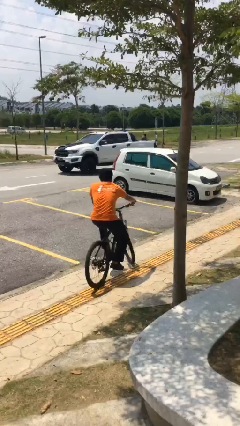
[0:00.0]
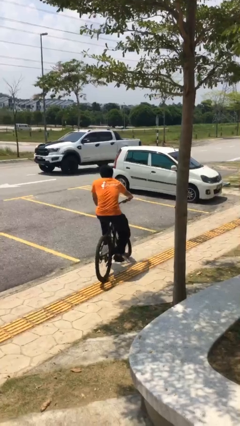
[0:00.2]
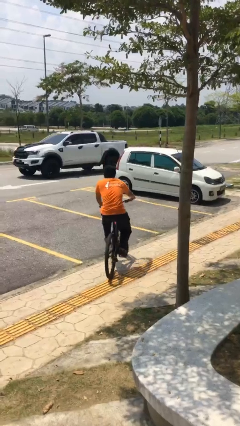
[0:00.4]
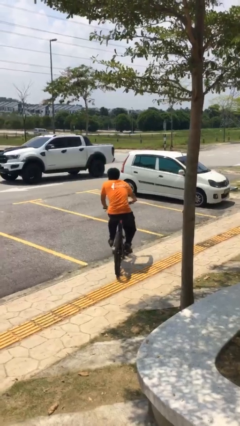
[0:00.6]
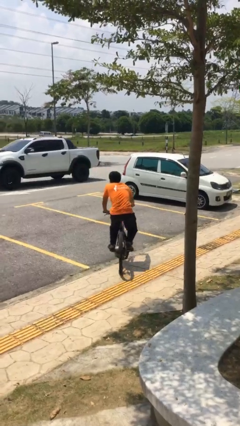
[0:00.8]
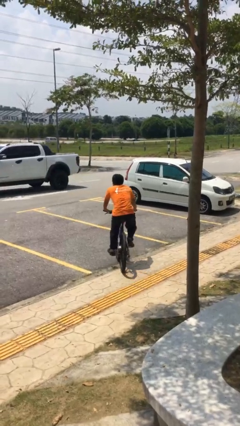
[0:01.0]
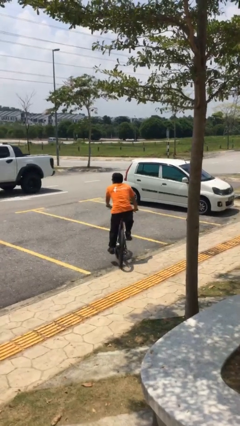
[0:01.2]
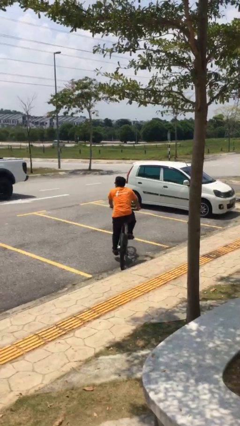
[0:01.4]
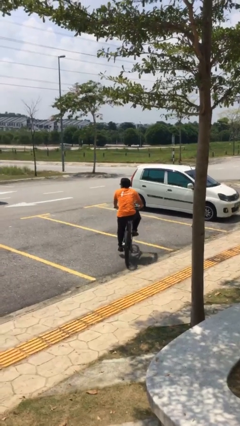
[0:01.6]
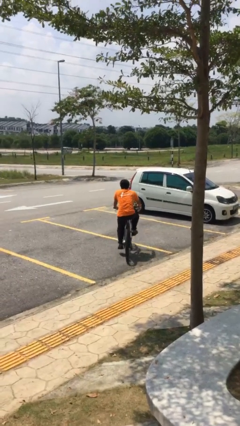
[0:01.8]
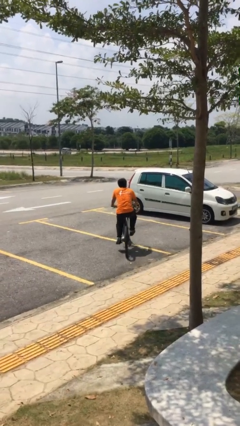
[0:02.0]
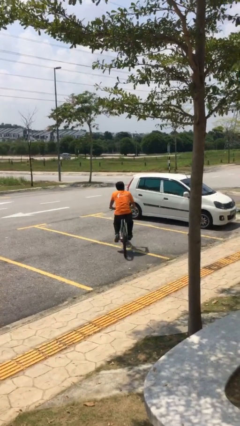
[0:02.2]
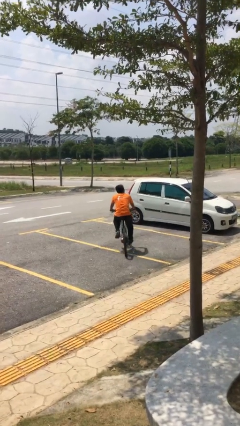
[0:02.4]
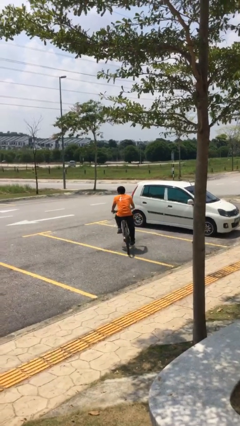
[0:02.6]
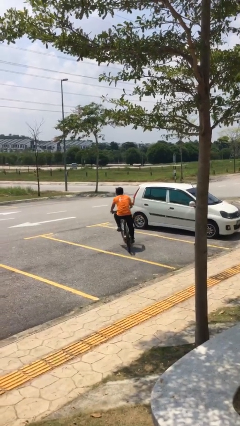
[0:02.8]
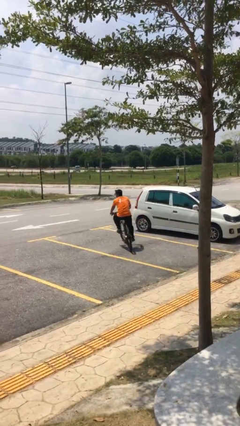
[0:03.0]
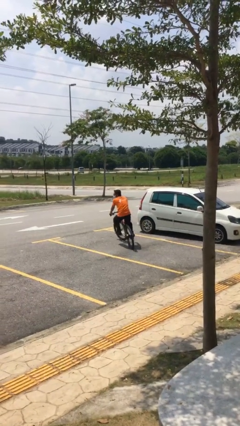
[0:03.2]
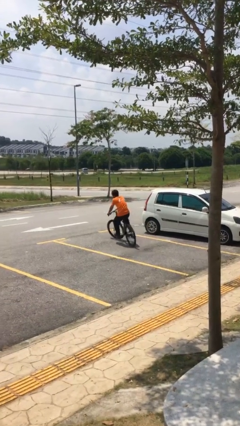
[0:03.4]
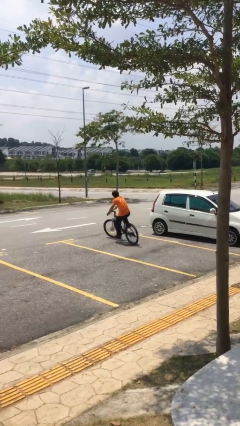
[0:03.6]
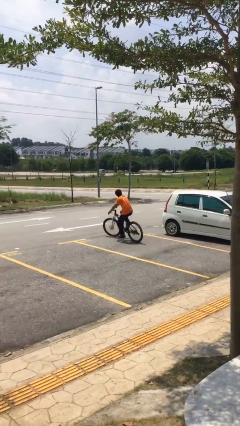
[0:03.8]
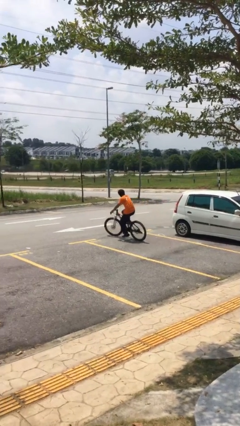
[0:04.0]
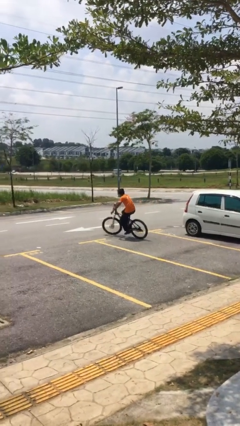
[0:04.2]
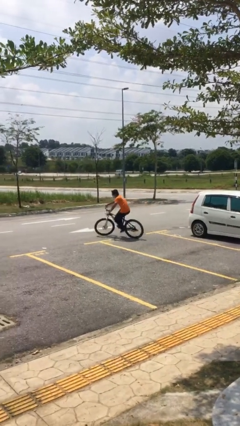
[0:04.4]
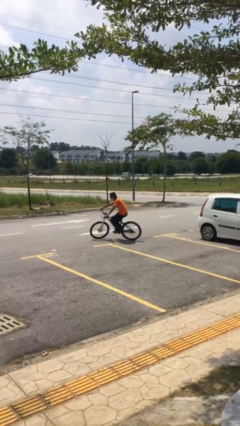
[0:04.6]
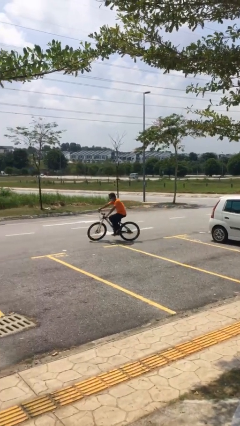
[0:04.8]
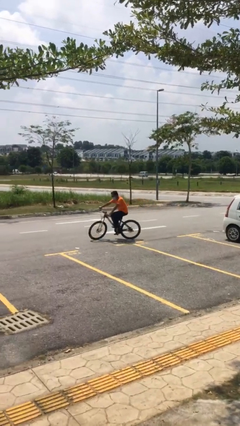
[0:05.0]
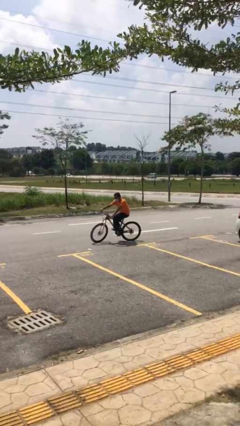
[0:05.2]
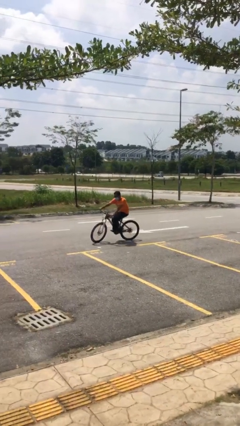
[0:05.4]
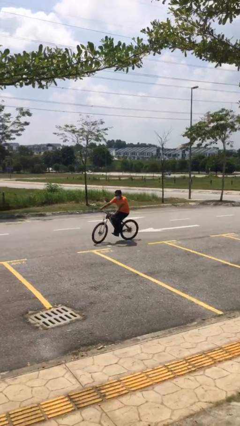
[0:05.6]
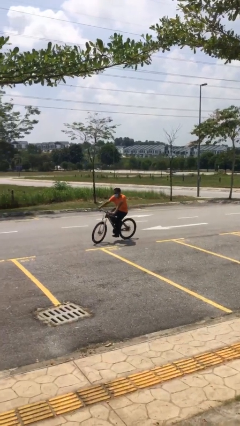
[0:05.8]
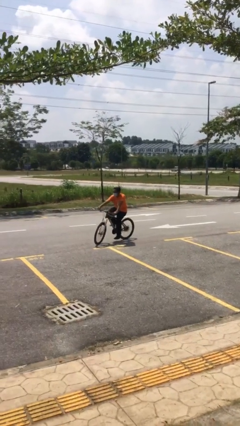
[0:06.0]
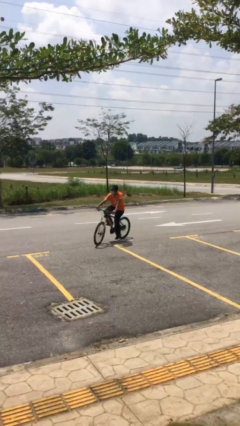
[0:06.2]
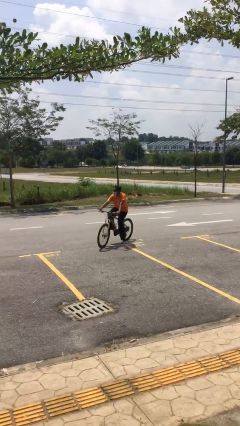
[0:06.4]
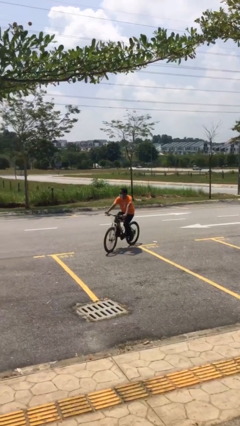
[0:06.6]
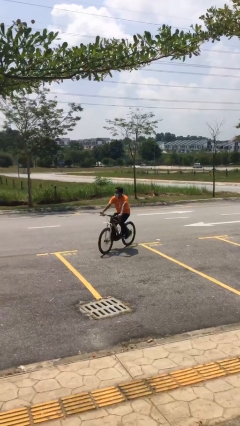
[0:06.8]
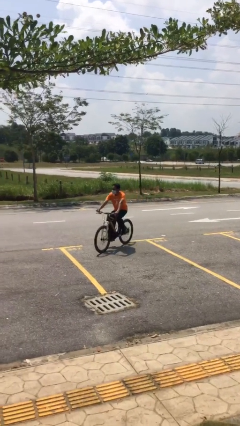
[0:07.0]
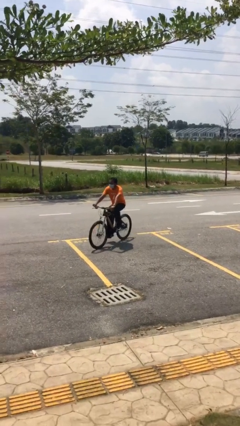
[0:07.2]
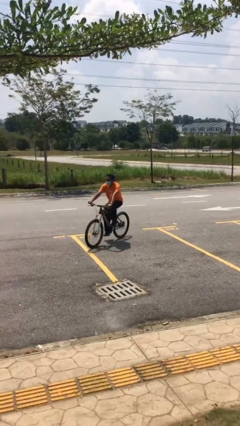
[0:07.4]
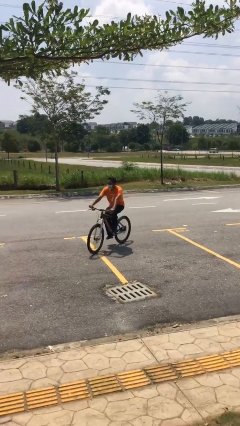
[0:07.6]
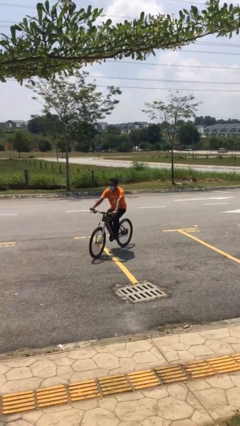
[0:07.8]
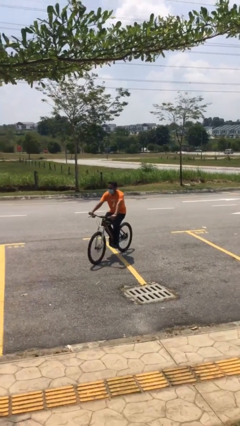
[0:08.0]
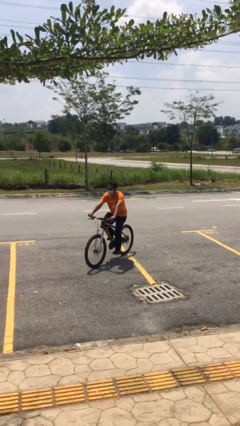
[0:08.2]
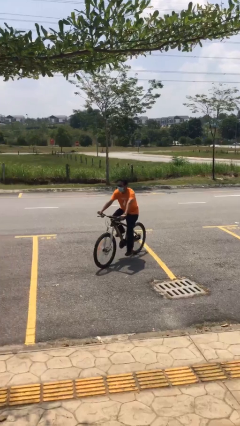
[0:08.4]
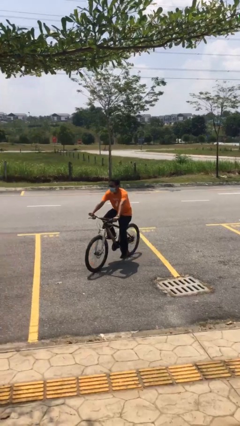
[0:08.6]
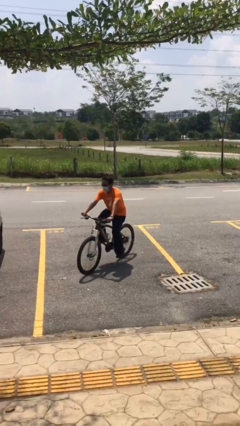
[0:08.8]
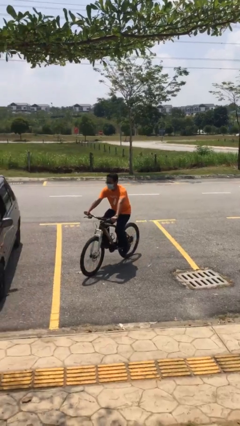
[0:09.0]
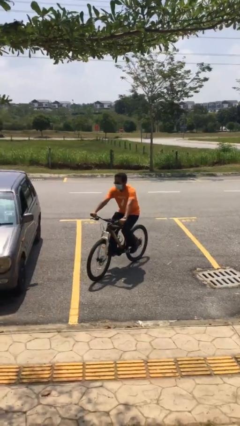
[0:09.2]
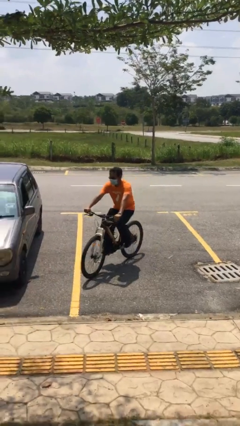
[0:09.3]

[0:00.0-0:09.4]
person rides bicycle

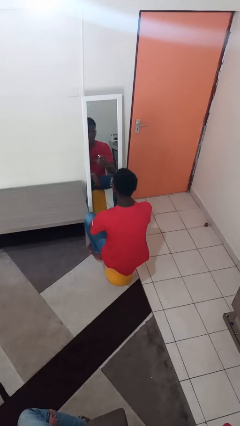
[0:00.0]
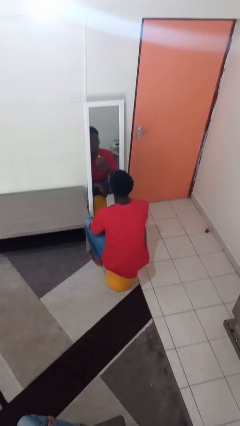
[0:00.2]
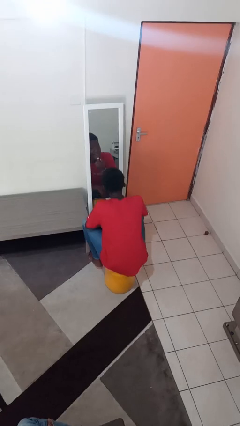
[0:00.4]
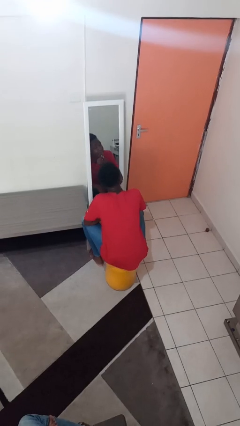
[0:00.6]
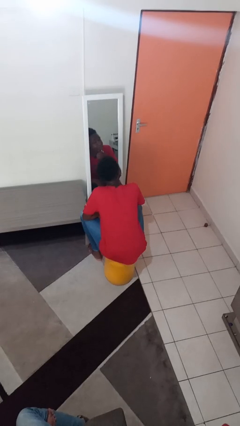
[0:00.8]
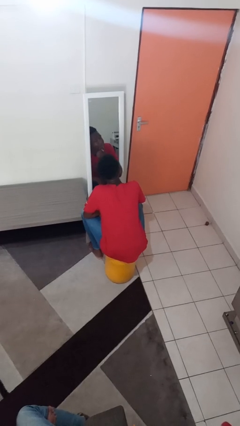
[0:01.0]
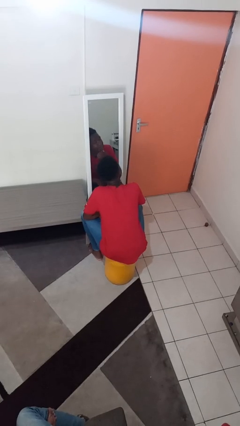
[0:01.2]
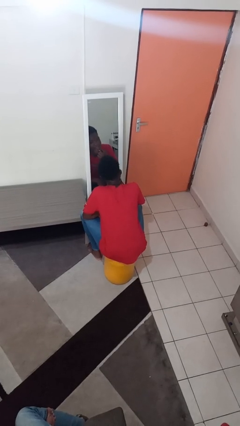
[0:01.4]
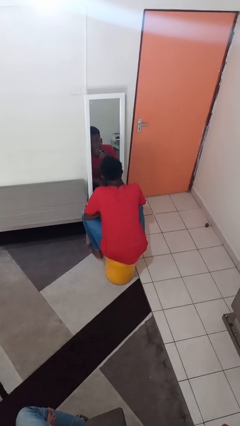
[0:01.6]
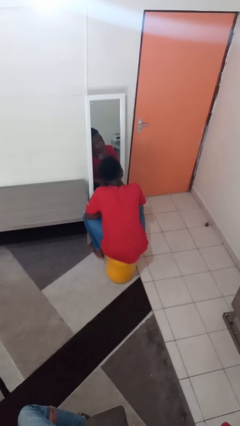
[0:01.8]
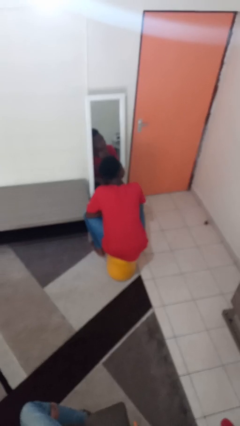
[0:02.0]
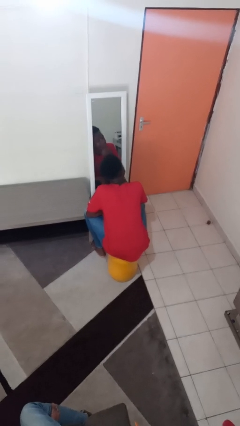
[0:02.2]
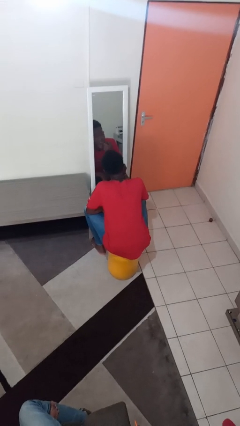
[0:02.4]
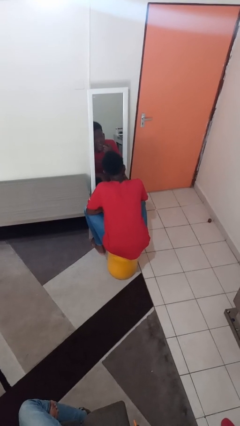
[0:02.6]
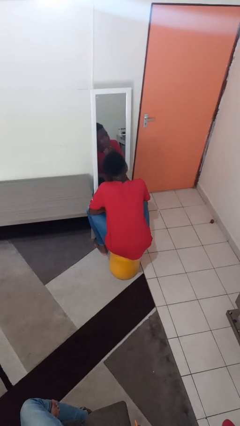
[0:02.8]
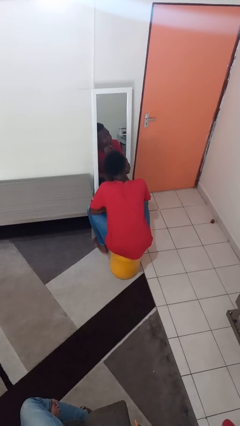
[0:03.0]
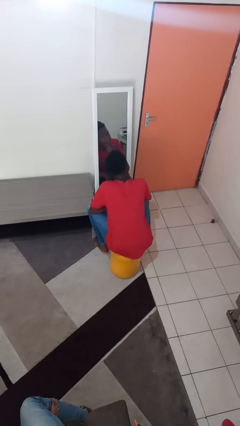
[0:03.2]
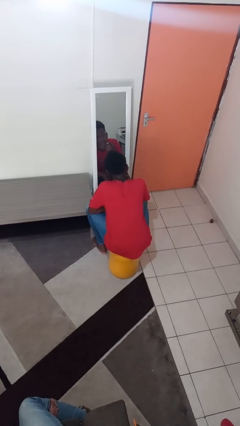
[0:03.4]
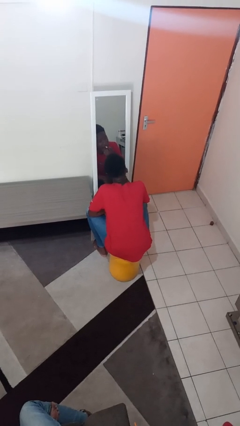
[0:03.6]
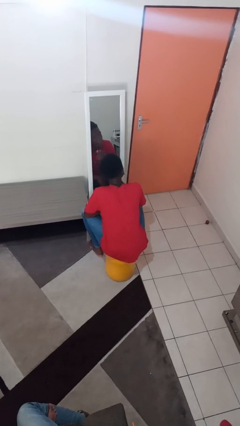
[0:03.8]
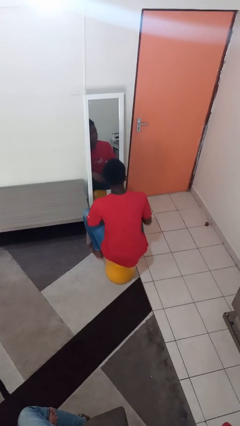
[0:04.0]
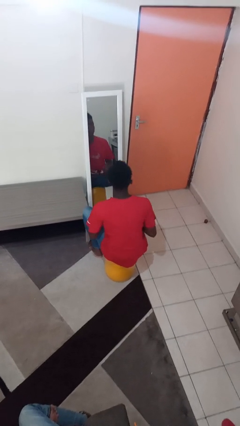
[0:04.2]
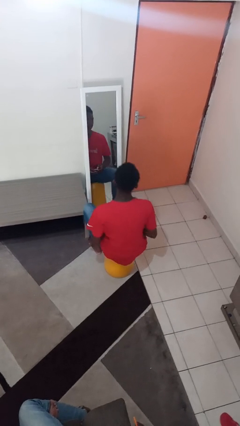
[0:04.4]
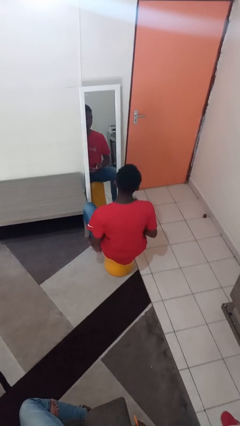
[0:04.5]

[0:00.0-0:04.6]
person applies lip makeup

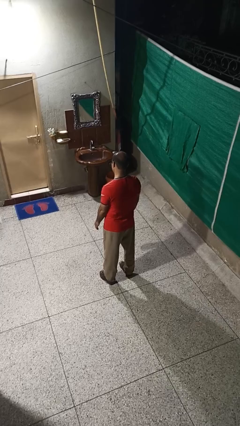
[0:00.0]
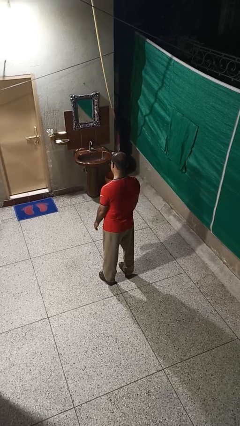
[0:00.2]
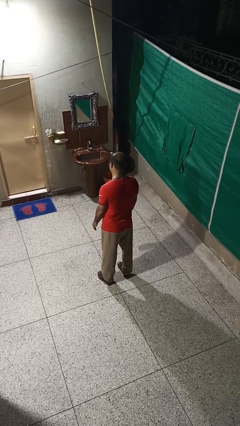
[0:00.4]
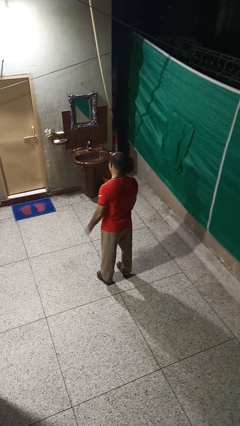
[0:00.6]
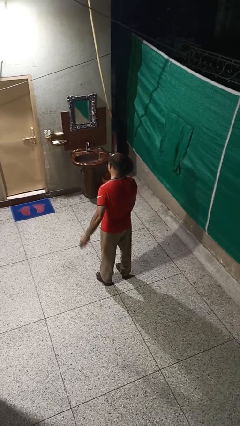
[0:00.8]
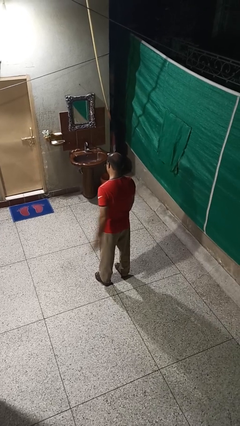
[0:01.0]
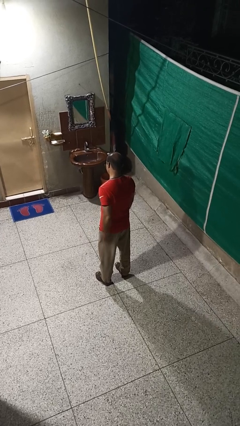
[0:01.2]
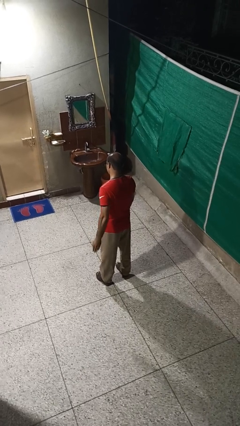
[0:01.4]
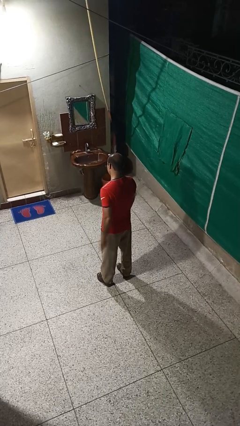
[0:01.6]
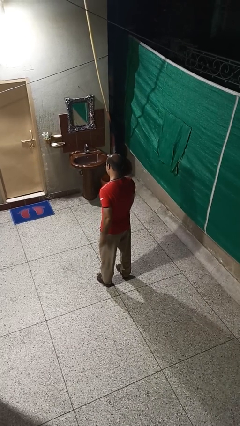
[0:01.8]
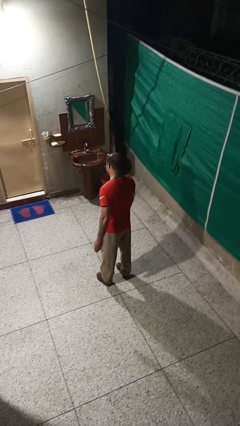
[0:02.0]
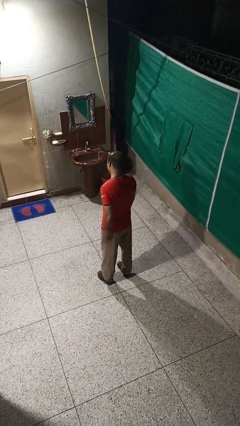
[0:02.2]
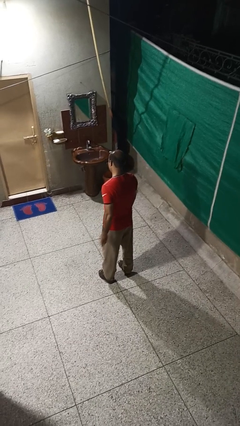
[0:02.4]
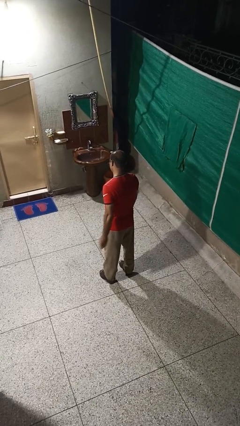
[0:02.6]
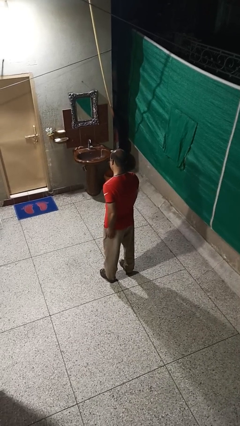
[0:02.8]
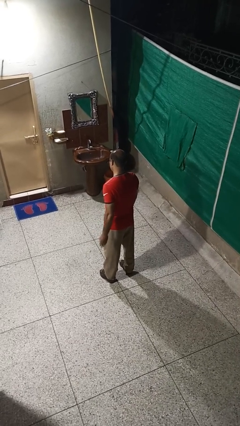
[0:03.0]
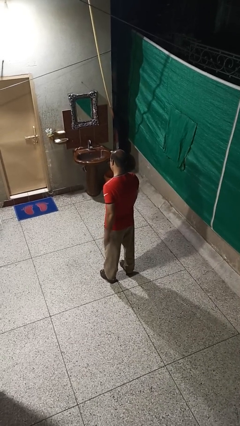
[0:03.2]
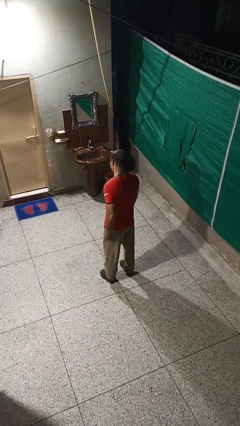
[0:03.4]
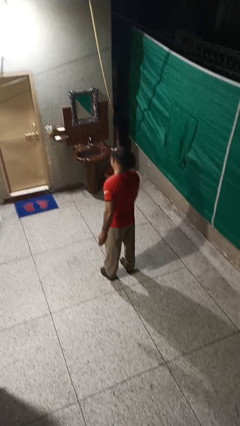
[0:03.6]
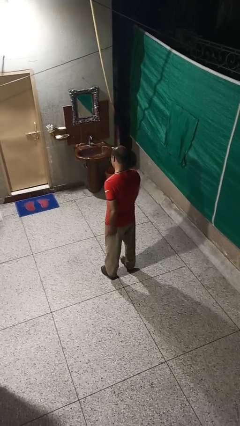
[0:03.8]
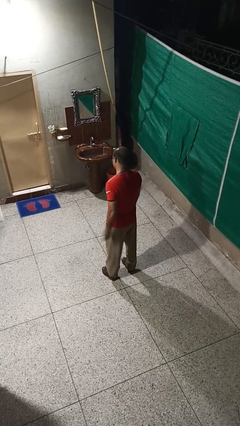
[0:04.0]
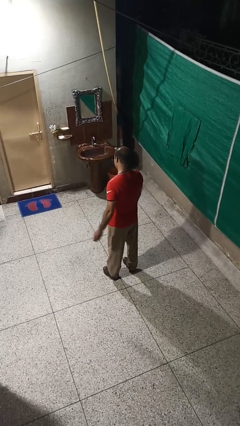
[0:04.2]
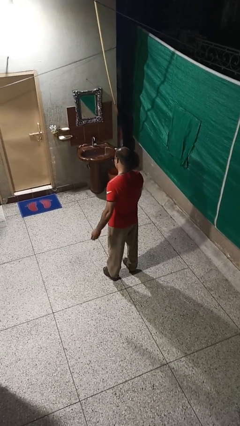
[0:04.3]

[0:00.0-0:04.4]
person slaps hands on thighs
